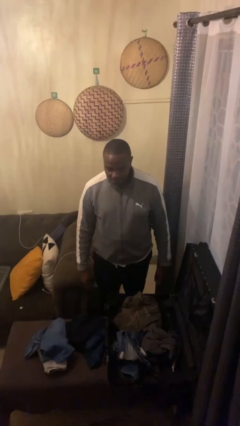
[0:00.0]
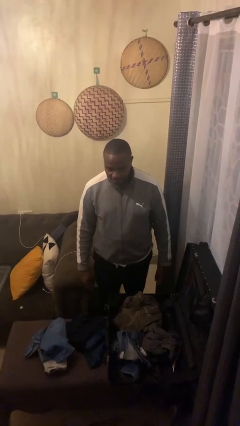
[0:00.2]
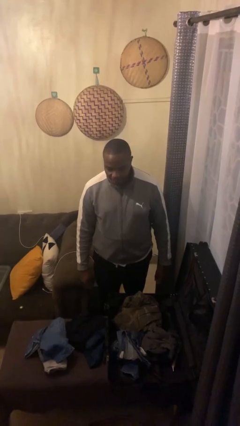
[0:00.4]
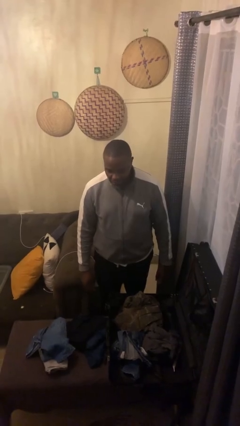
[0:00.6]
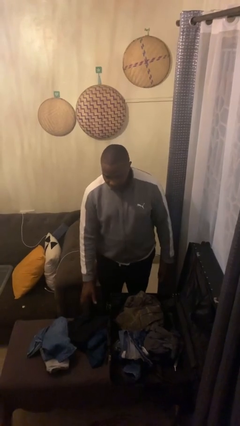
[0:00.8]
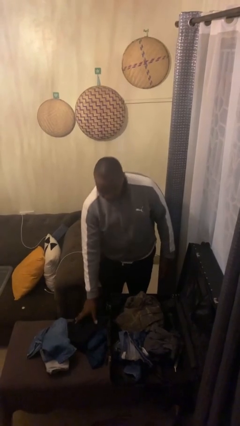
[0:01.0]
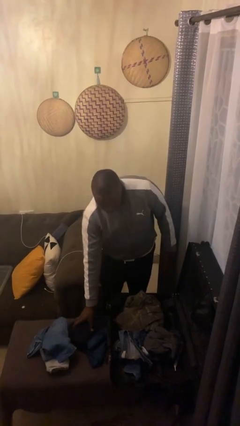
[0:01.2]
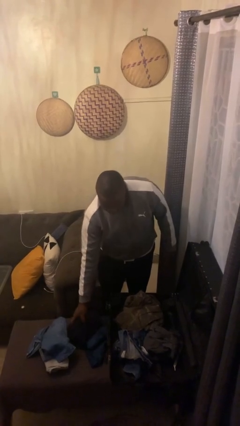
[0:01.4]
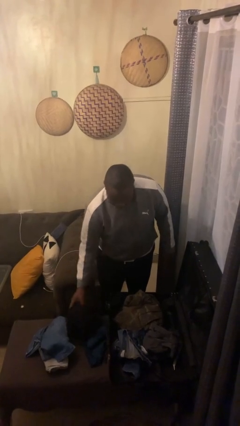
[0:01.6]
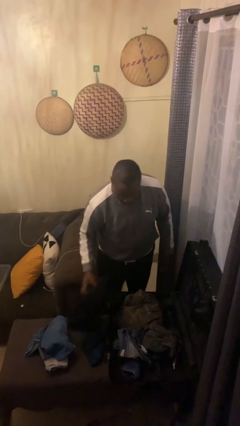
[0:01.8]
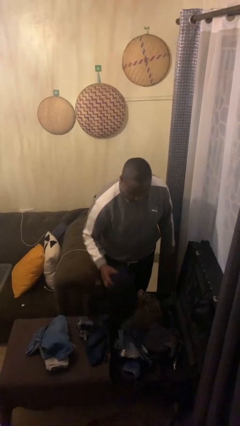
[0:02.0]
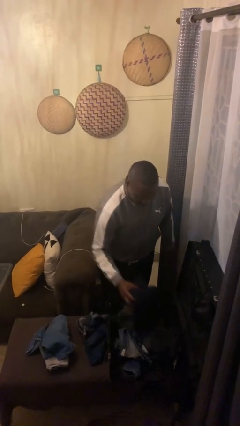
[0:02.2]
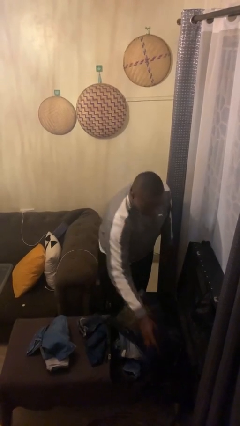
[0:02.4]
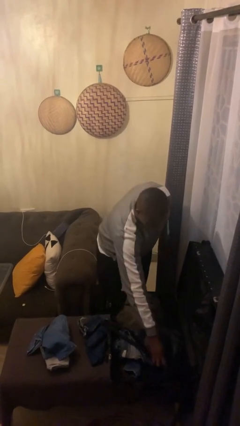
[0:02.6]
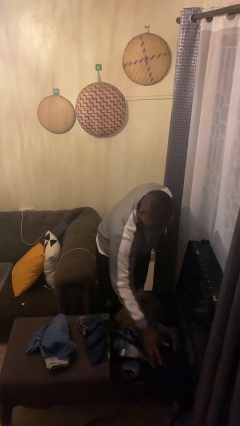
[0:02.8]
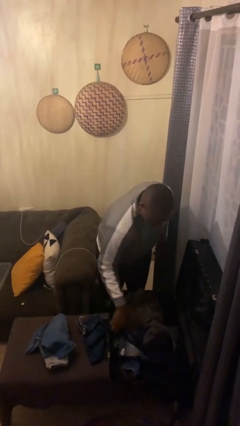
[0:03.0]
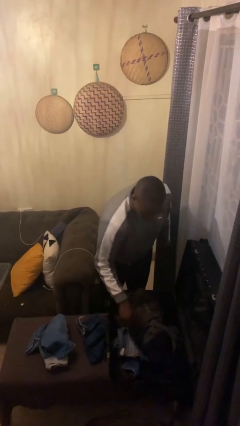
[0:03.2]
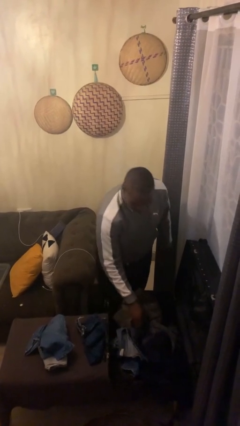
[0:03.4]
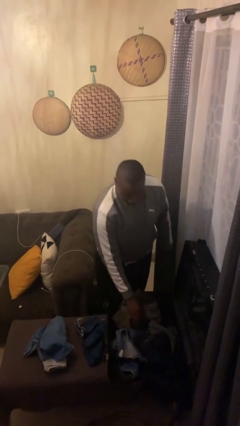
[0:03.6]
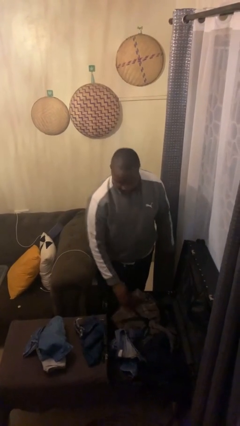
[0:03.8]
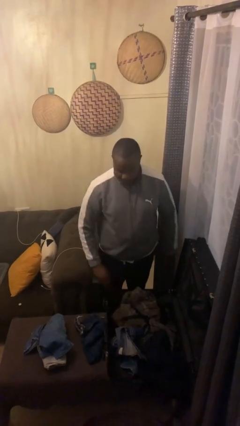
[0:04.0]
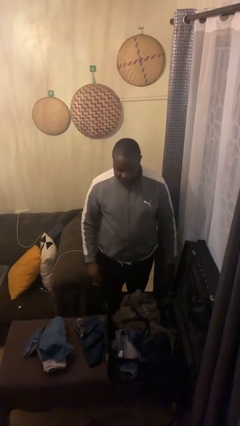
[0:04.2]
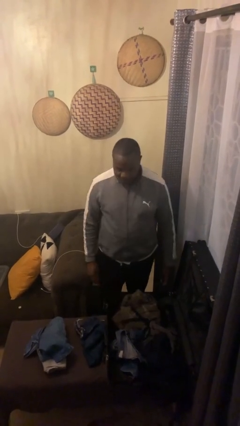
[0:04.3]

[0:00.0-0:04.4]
person loads clothes into suitcase

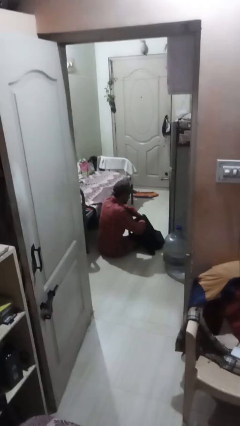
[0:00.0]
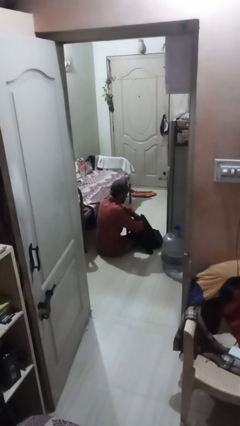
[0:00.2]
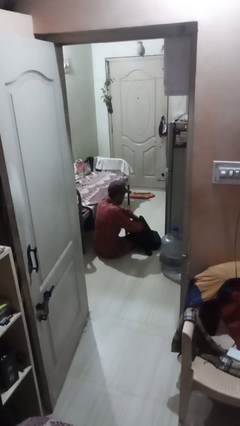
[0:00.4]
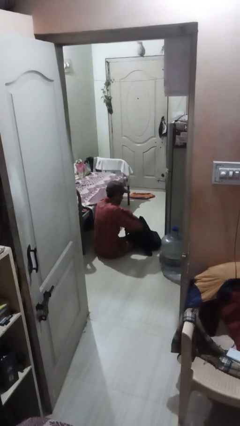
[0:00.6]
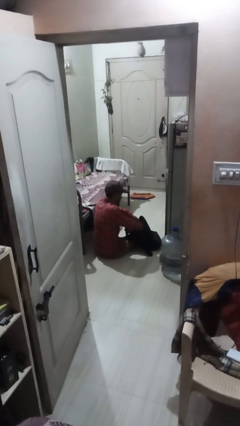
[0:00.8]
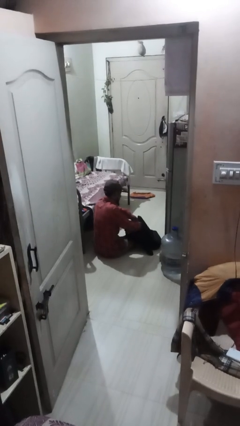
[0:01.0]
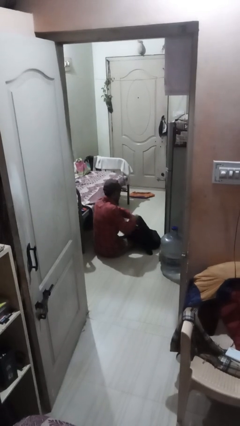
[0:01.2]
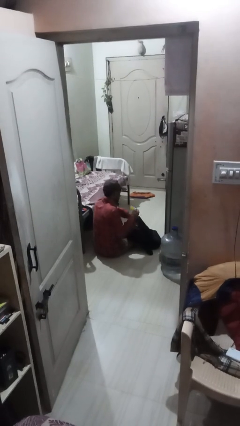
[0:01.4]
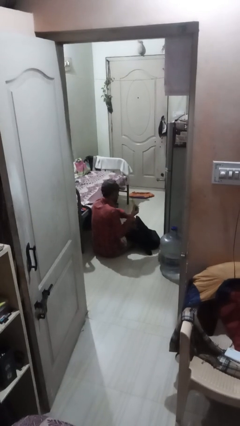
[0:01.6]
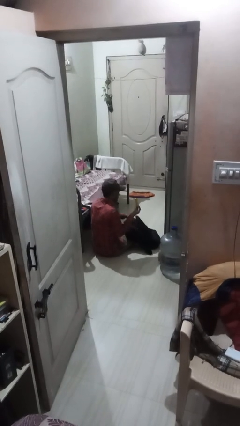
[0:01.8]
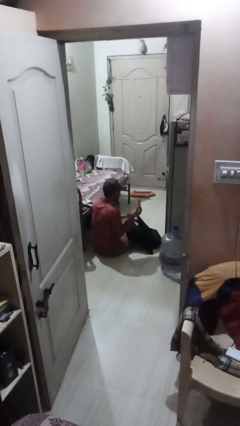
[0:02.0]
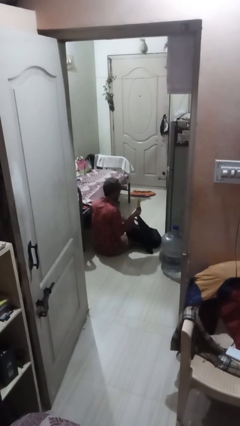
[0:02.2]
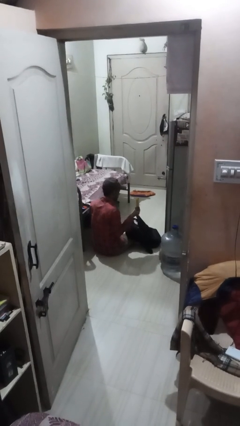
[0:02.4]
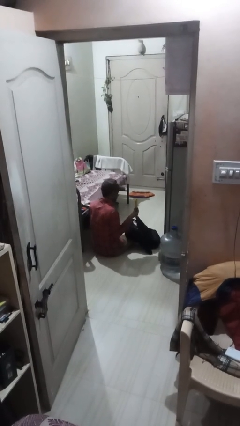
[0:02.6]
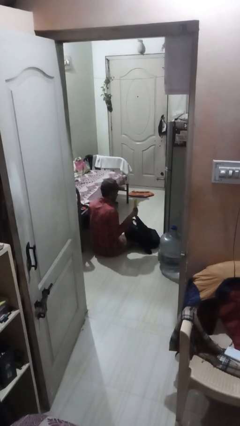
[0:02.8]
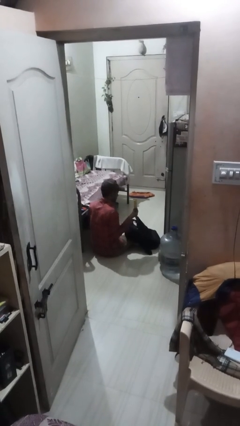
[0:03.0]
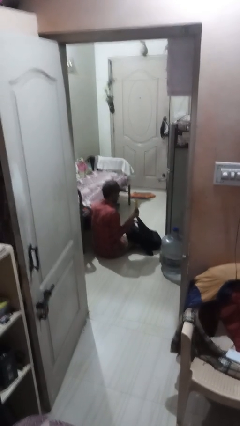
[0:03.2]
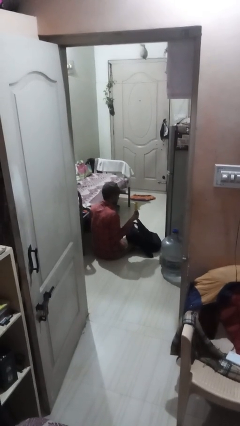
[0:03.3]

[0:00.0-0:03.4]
person takes object from backpack

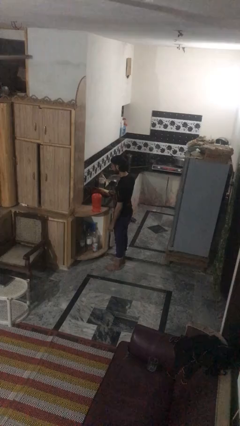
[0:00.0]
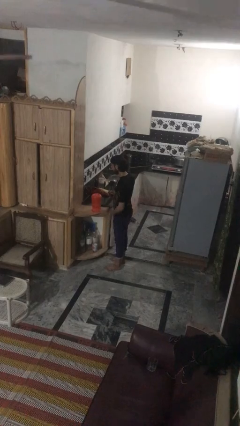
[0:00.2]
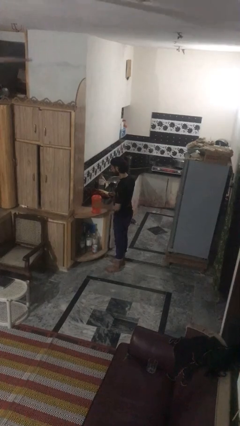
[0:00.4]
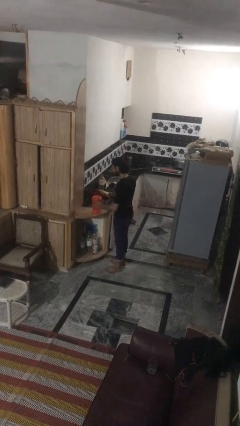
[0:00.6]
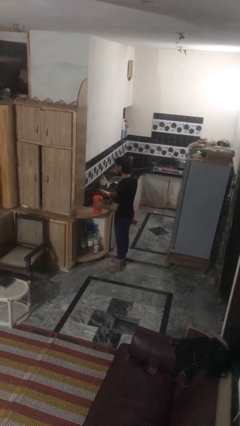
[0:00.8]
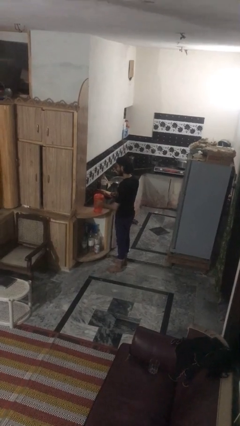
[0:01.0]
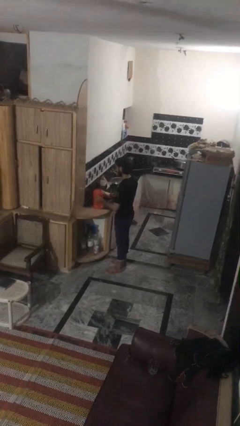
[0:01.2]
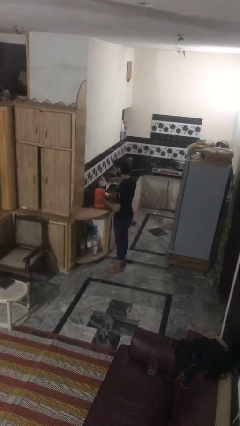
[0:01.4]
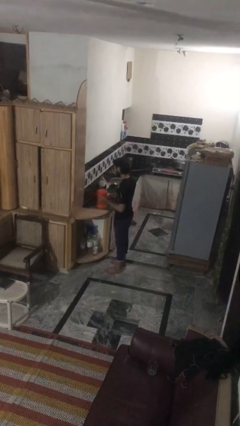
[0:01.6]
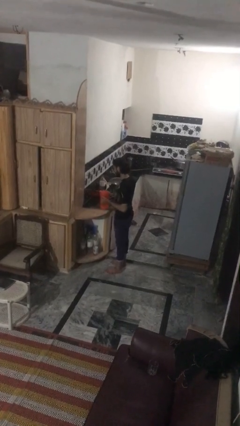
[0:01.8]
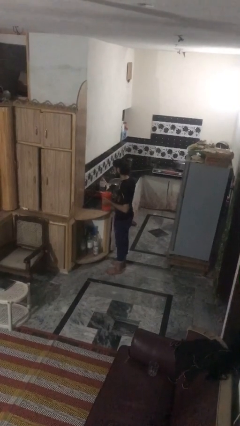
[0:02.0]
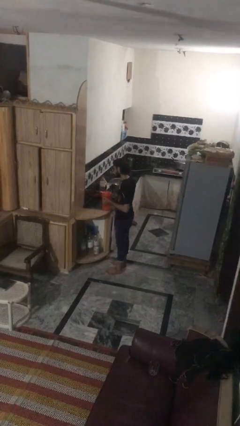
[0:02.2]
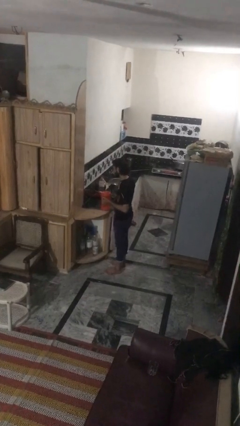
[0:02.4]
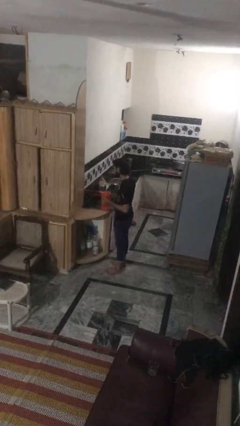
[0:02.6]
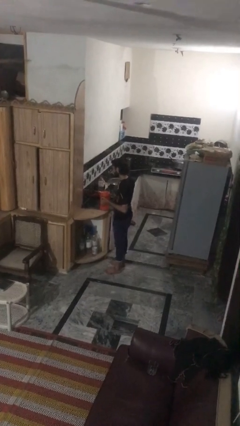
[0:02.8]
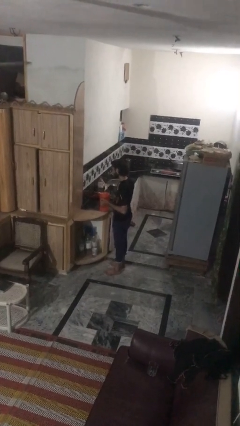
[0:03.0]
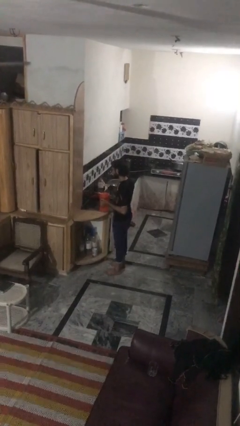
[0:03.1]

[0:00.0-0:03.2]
person picks up object from countertop

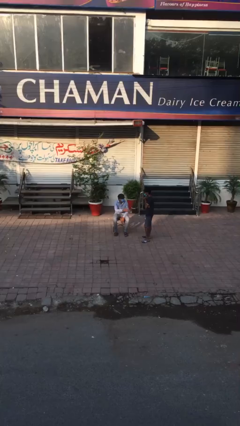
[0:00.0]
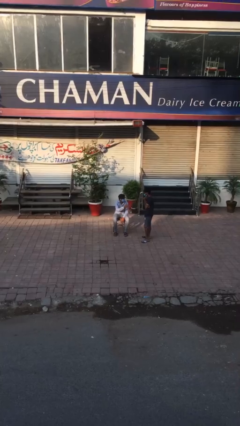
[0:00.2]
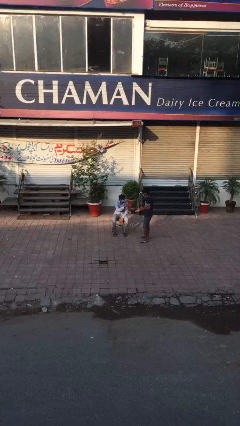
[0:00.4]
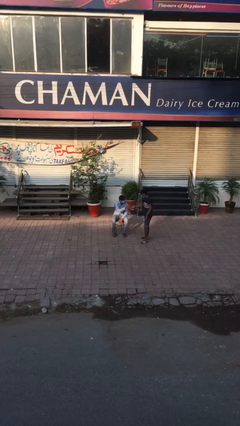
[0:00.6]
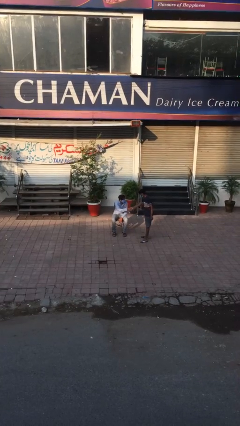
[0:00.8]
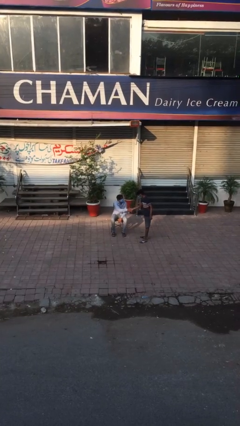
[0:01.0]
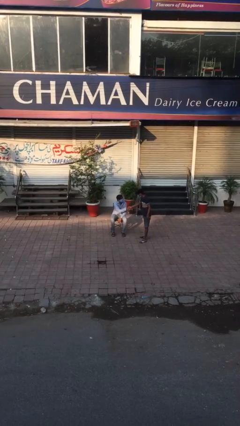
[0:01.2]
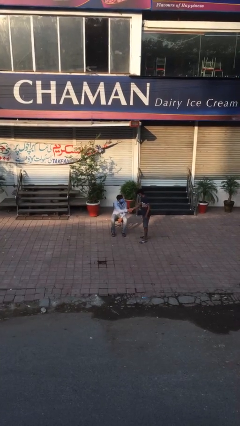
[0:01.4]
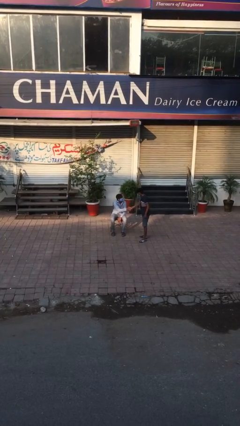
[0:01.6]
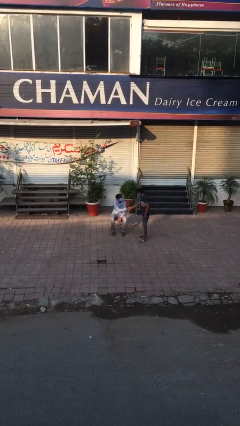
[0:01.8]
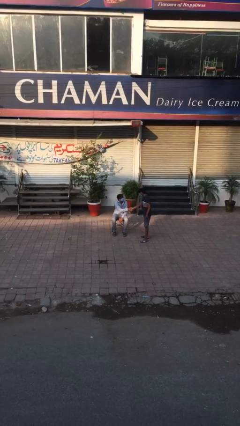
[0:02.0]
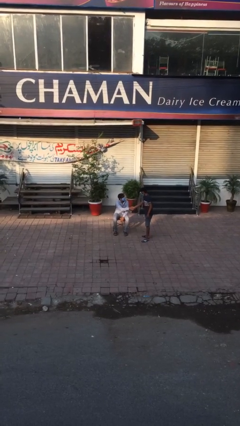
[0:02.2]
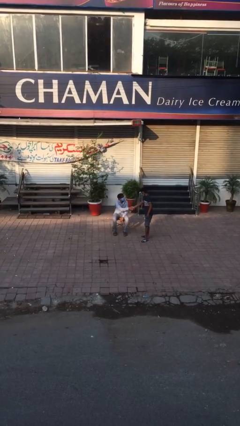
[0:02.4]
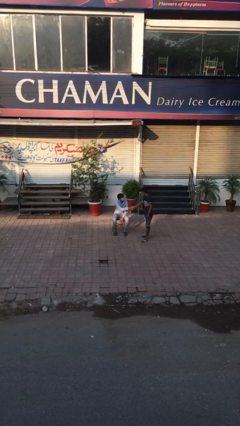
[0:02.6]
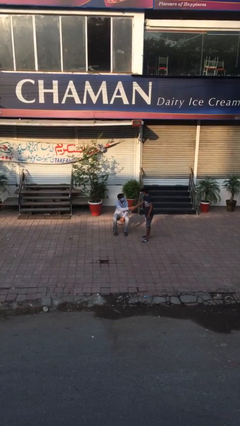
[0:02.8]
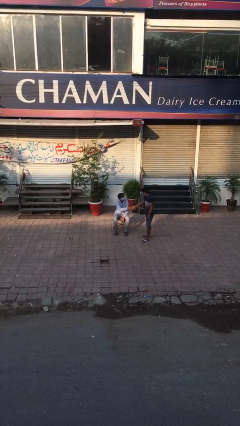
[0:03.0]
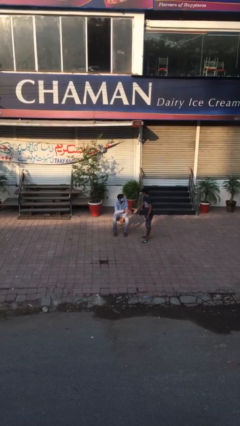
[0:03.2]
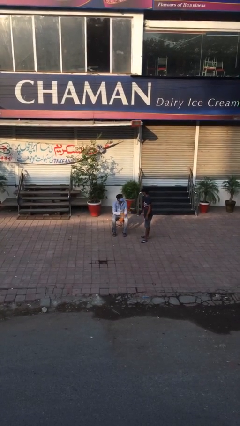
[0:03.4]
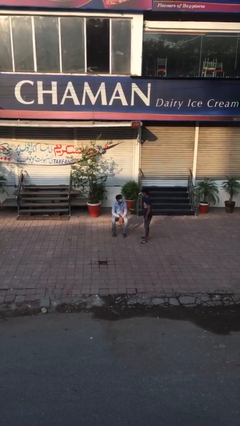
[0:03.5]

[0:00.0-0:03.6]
person shakes hand

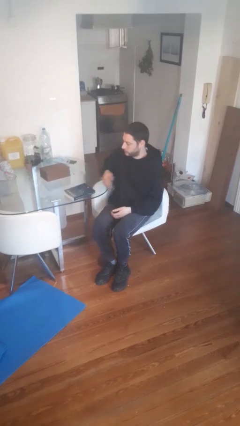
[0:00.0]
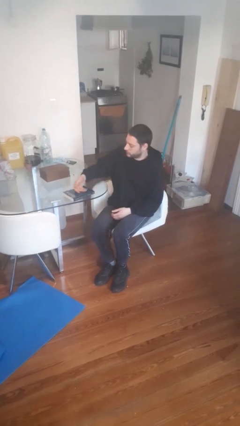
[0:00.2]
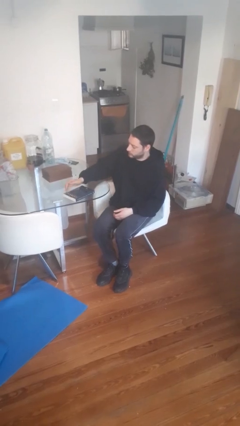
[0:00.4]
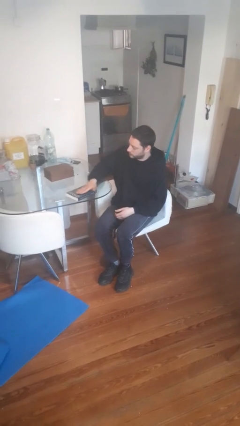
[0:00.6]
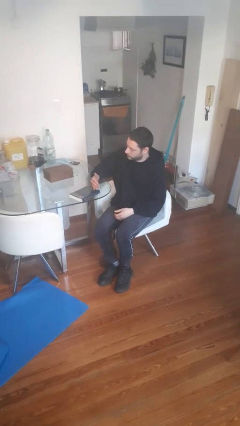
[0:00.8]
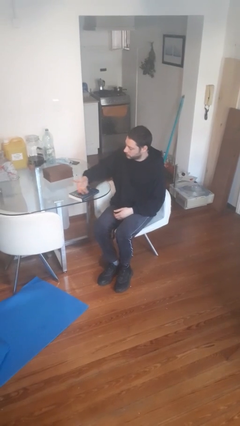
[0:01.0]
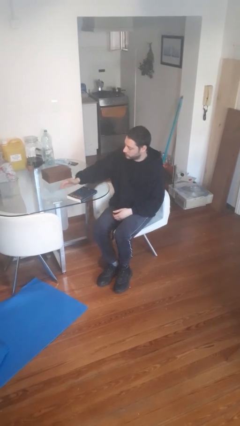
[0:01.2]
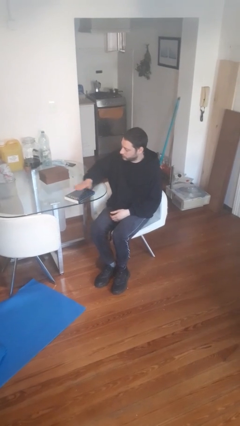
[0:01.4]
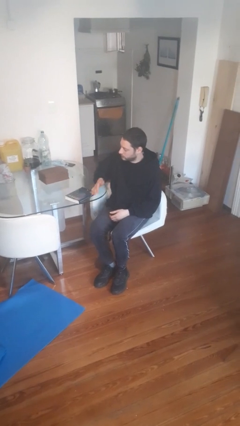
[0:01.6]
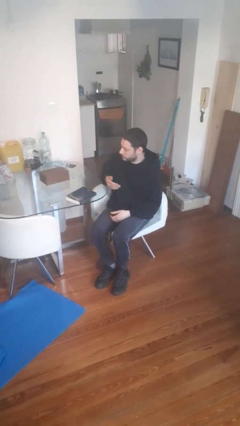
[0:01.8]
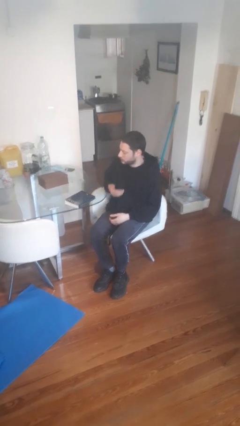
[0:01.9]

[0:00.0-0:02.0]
person waves hand over object

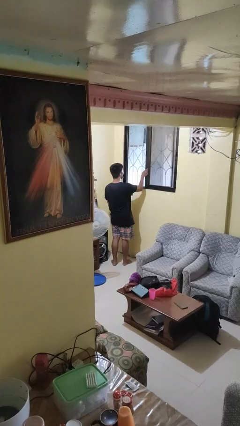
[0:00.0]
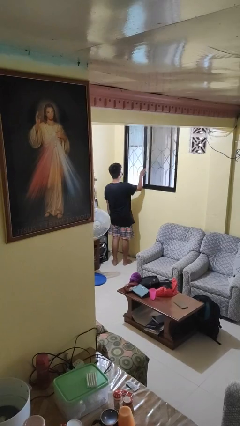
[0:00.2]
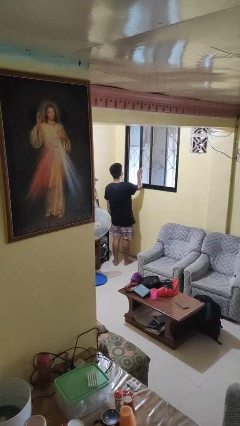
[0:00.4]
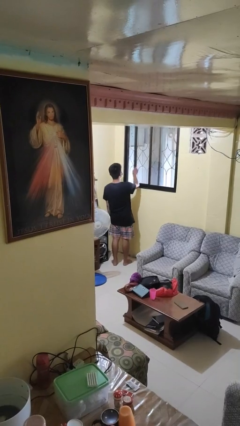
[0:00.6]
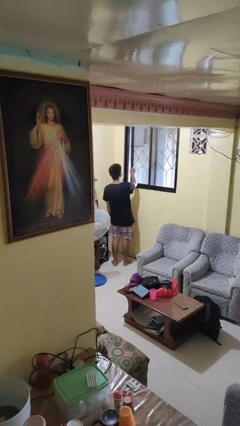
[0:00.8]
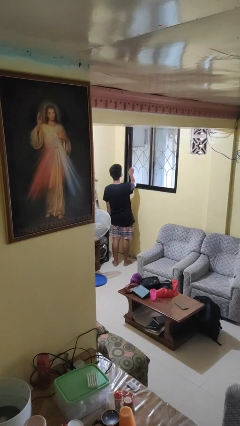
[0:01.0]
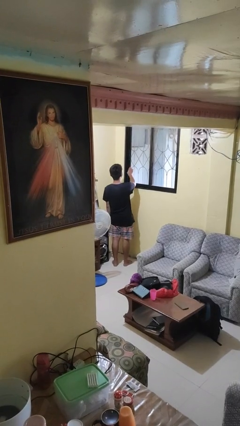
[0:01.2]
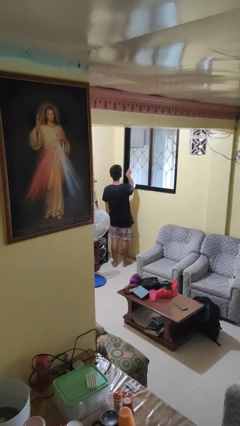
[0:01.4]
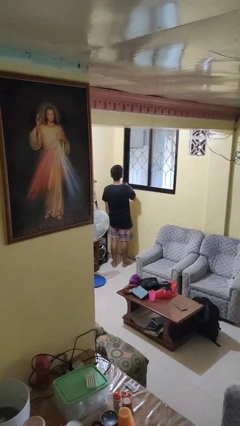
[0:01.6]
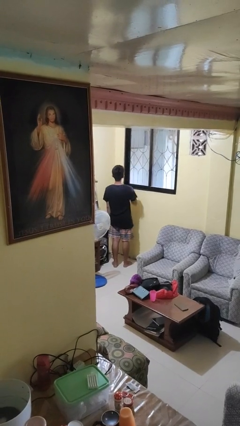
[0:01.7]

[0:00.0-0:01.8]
person closes home window
